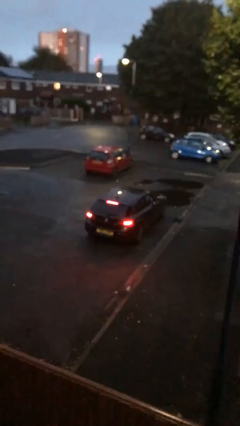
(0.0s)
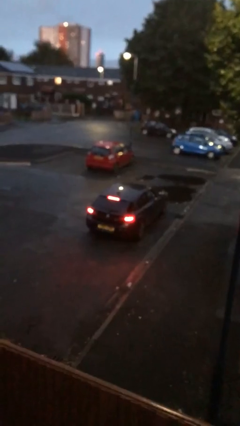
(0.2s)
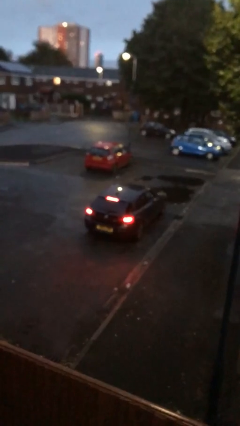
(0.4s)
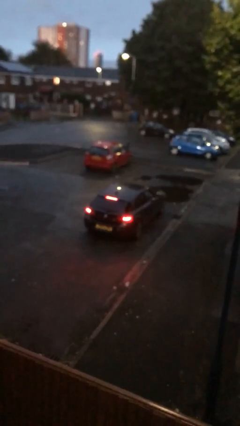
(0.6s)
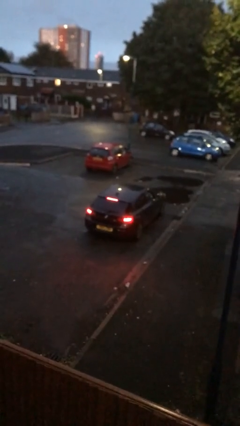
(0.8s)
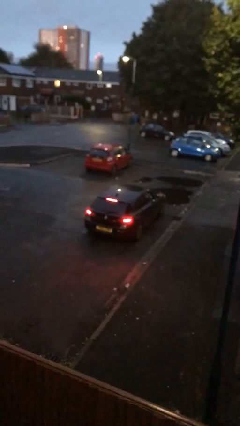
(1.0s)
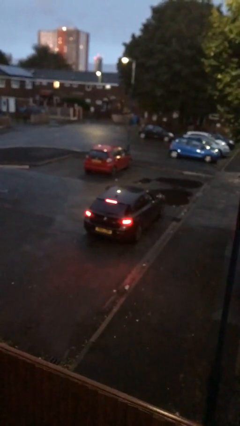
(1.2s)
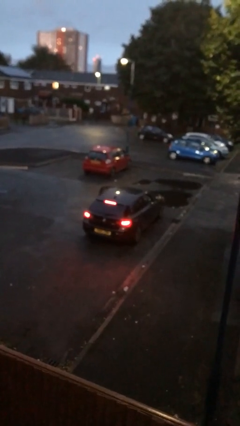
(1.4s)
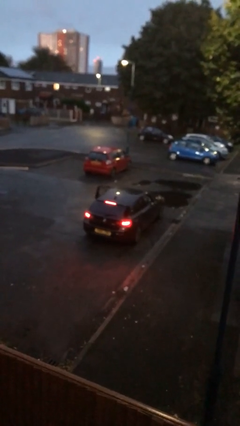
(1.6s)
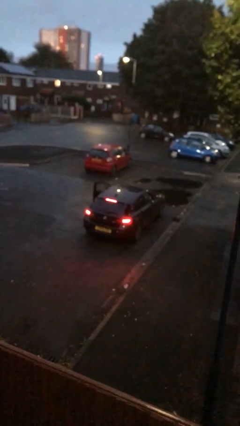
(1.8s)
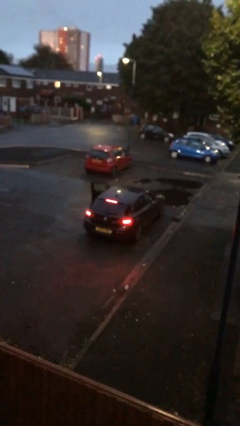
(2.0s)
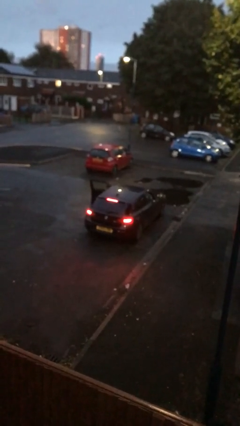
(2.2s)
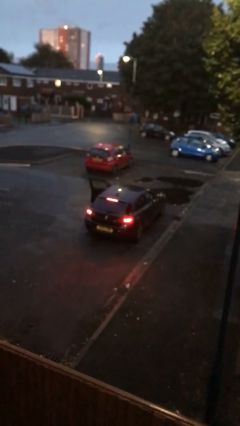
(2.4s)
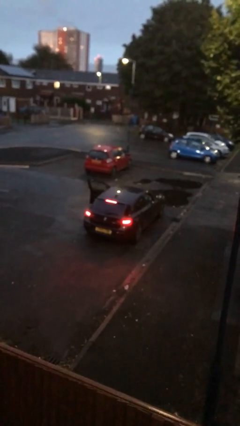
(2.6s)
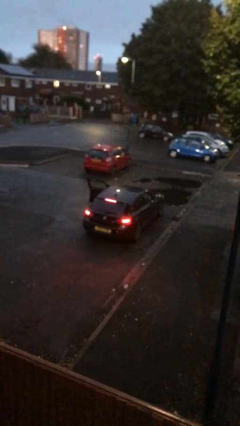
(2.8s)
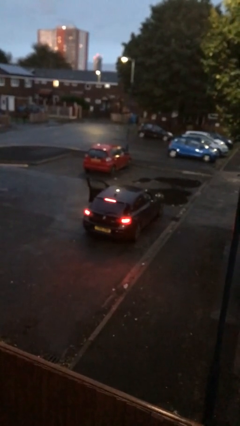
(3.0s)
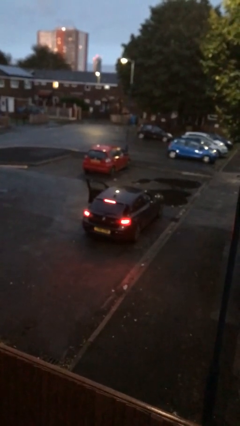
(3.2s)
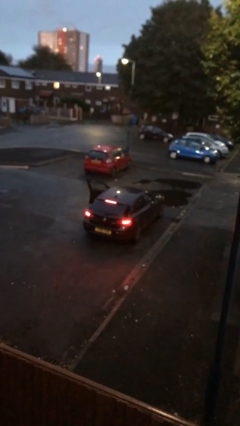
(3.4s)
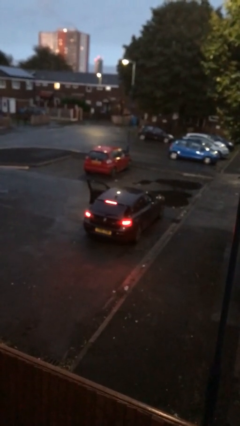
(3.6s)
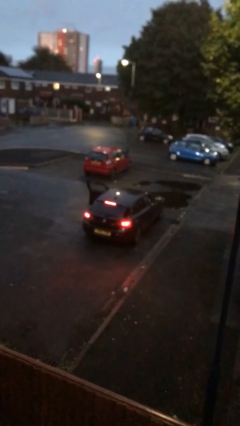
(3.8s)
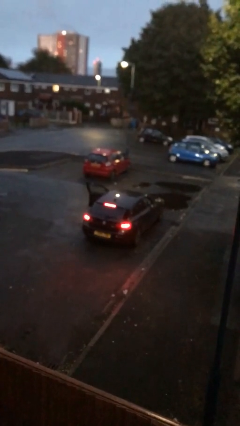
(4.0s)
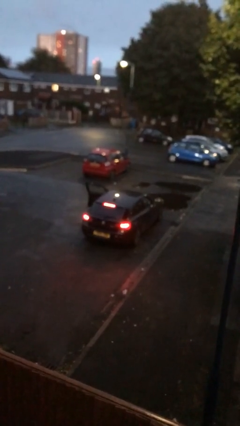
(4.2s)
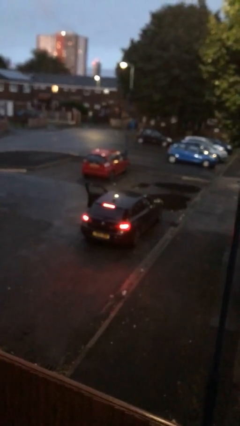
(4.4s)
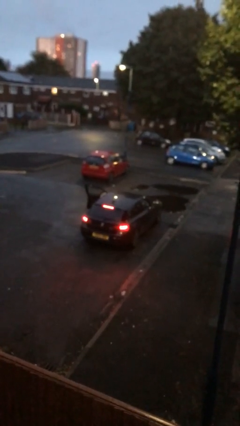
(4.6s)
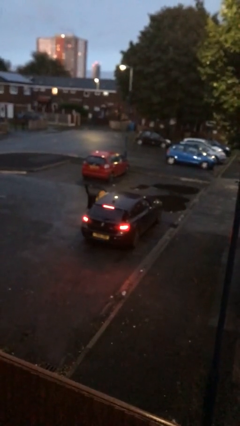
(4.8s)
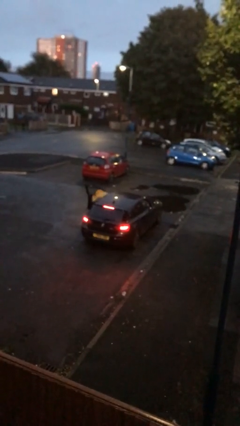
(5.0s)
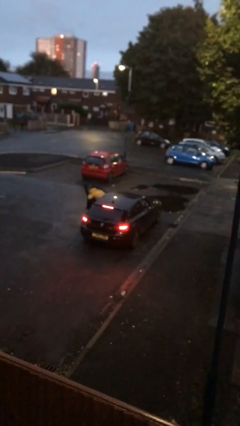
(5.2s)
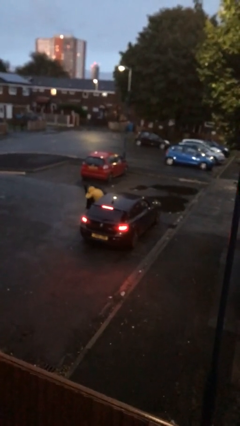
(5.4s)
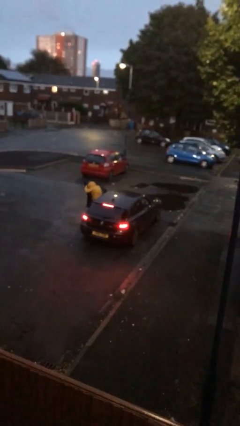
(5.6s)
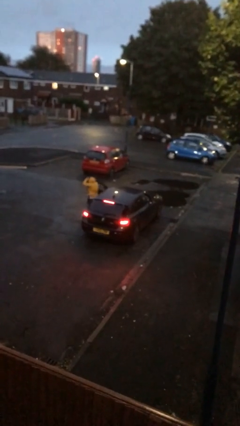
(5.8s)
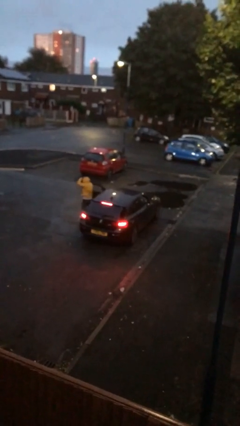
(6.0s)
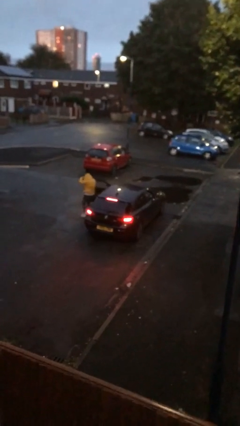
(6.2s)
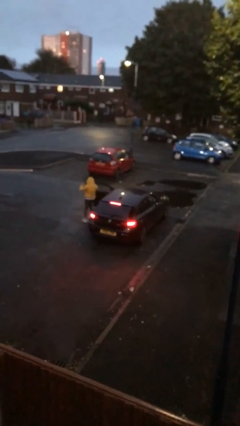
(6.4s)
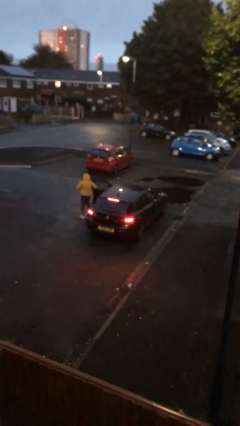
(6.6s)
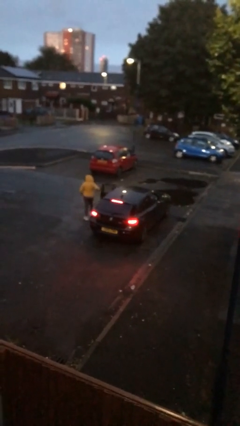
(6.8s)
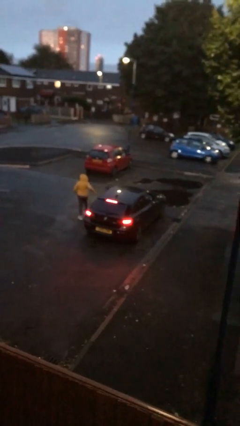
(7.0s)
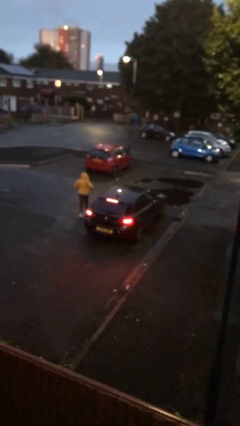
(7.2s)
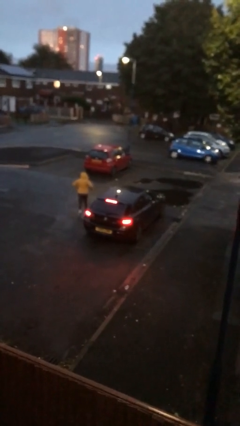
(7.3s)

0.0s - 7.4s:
car drops off person

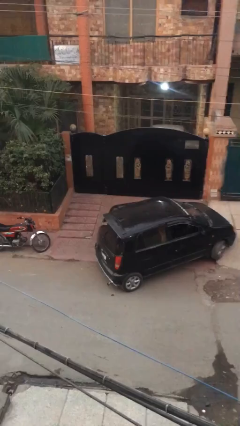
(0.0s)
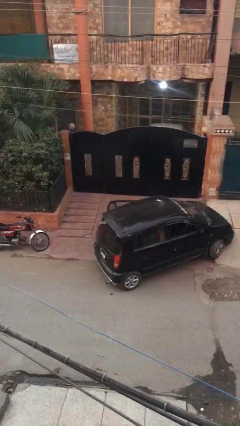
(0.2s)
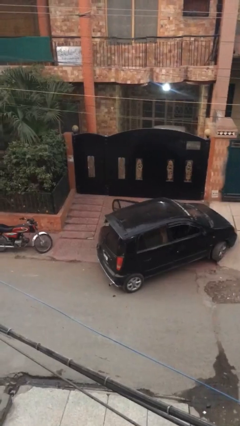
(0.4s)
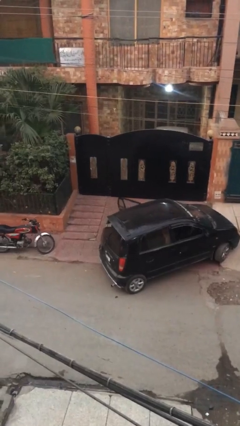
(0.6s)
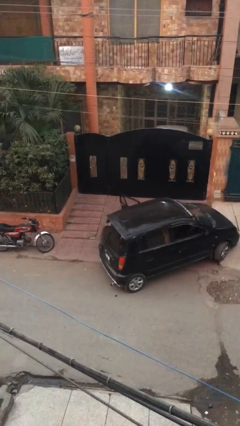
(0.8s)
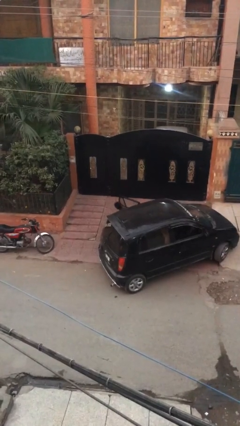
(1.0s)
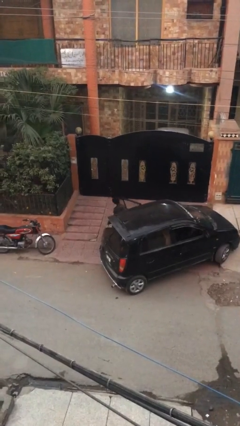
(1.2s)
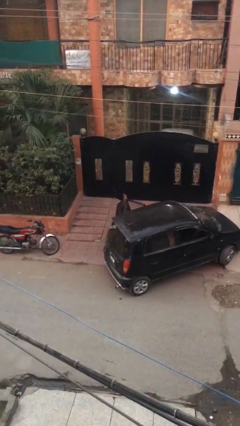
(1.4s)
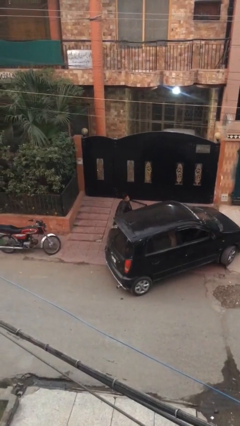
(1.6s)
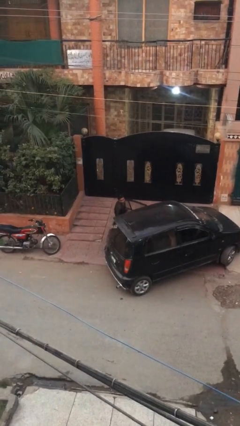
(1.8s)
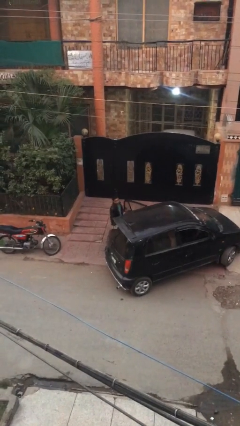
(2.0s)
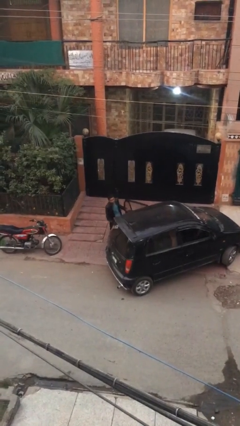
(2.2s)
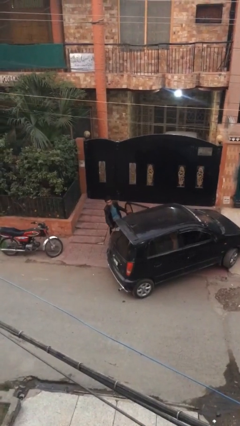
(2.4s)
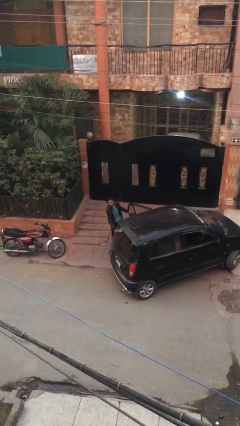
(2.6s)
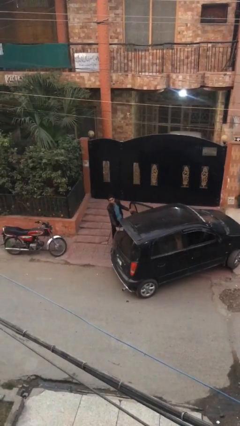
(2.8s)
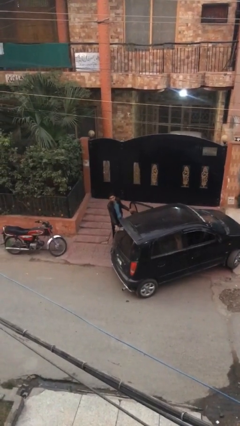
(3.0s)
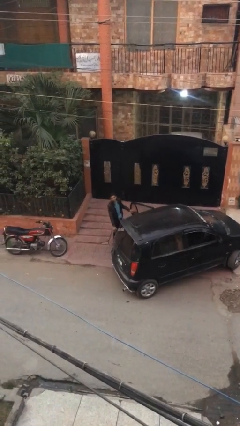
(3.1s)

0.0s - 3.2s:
person exits car

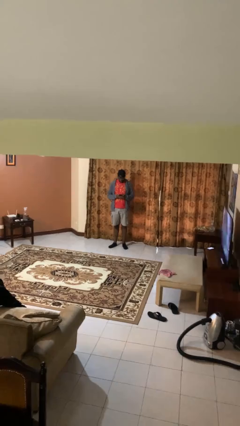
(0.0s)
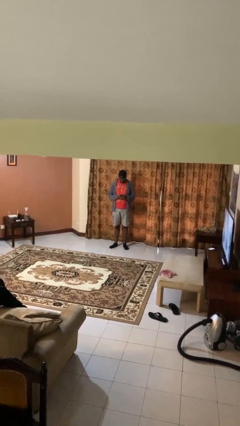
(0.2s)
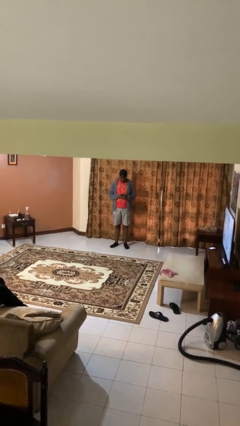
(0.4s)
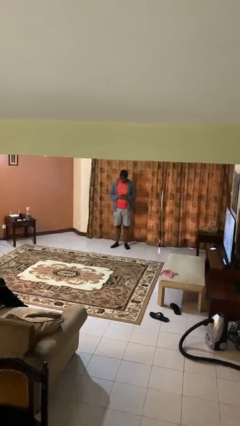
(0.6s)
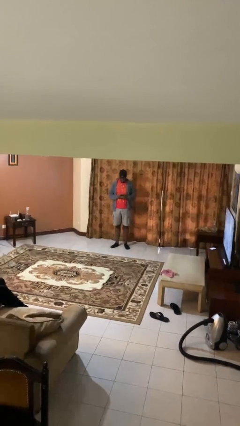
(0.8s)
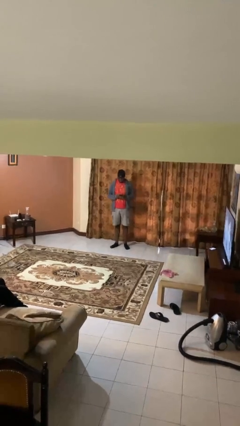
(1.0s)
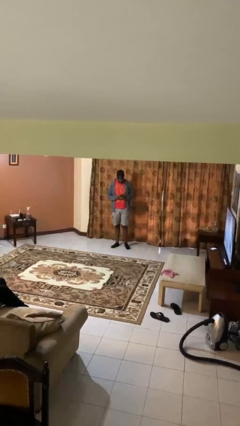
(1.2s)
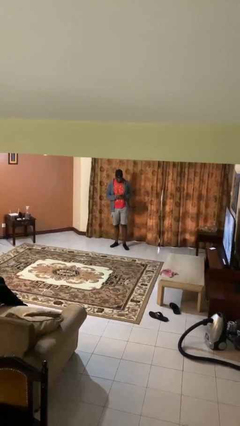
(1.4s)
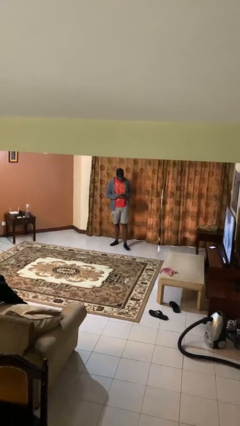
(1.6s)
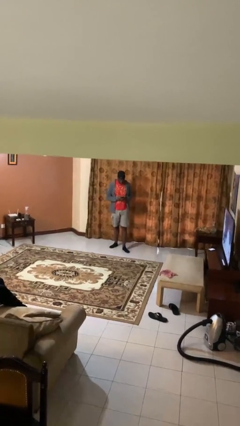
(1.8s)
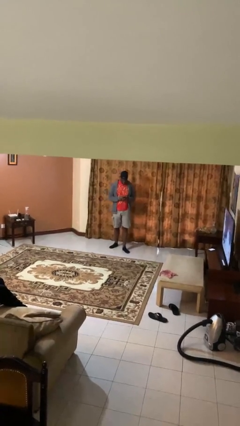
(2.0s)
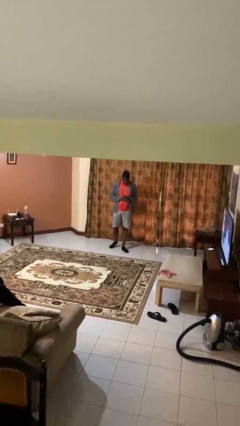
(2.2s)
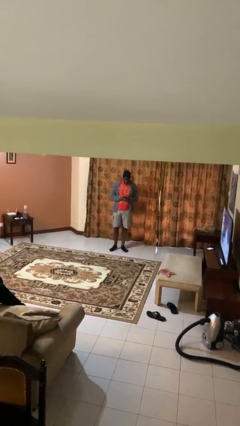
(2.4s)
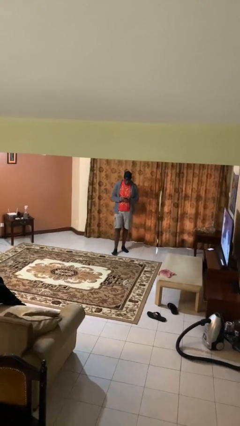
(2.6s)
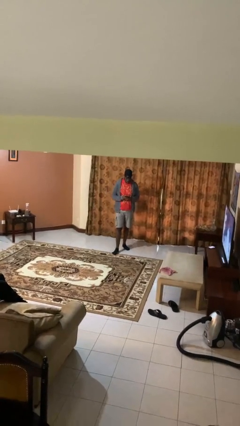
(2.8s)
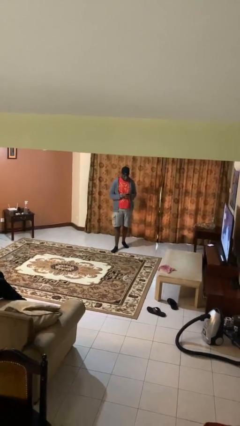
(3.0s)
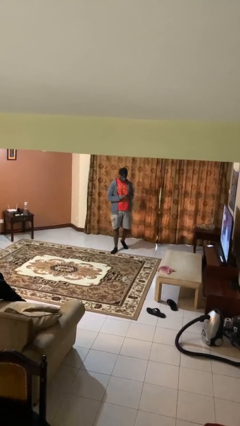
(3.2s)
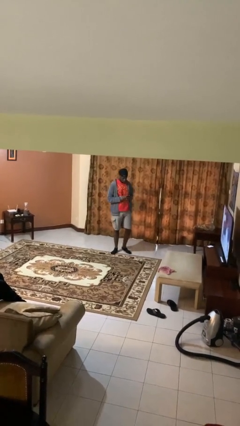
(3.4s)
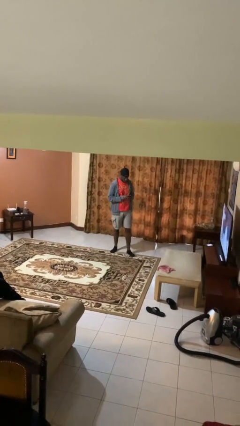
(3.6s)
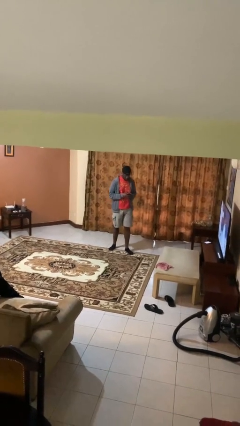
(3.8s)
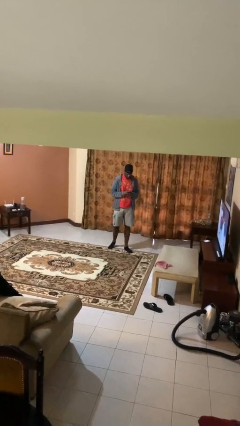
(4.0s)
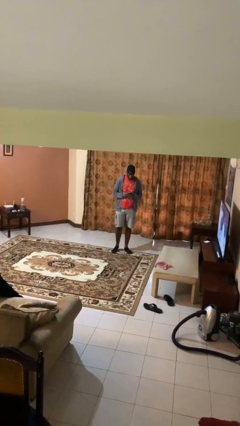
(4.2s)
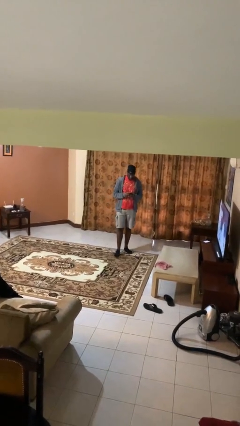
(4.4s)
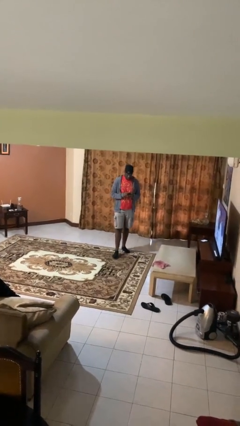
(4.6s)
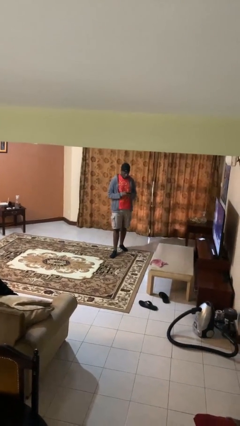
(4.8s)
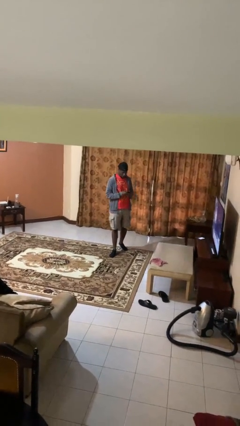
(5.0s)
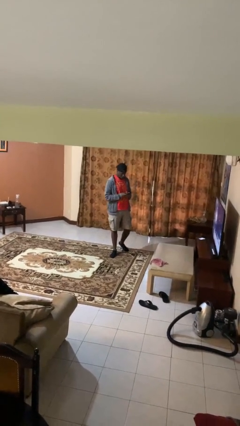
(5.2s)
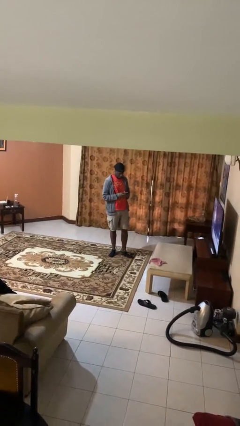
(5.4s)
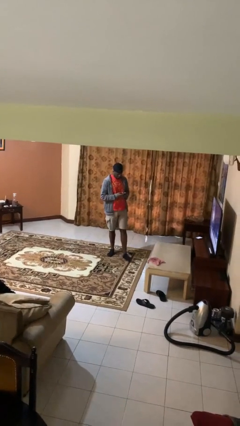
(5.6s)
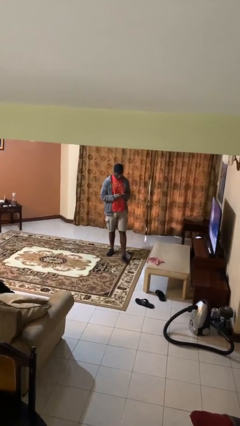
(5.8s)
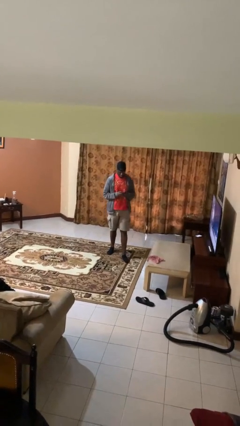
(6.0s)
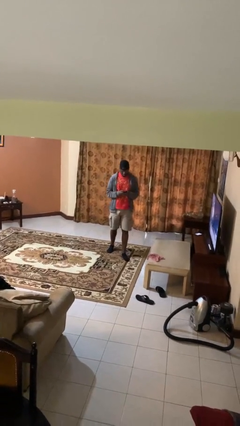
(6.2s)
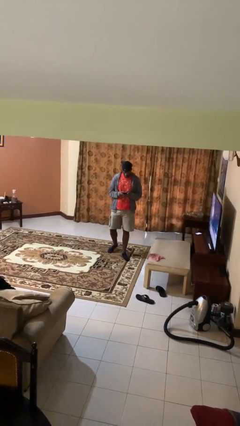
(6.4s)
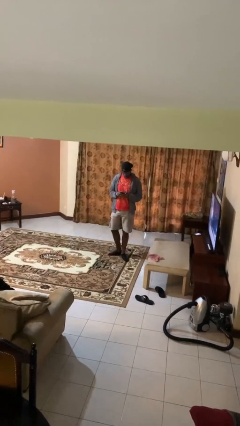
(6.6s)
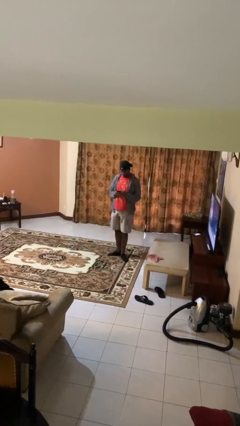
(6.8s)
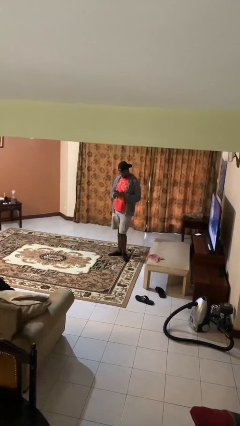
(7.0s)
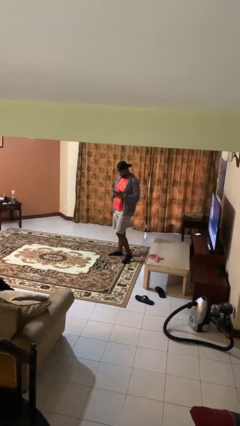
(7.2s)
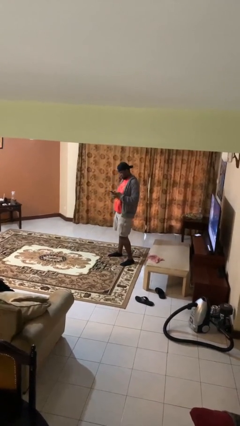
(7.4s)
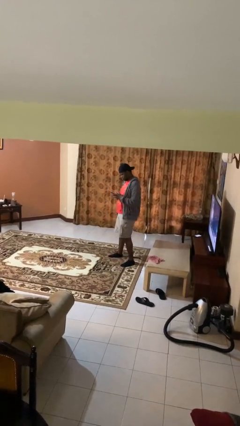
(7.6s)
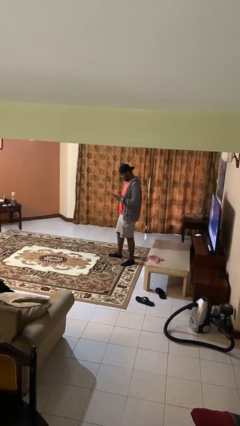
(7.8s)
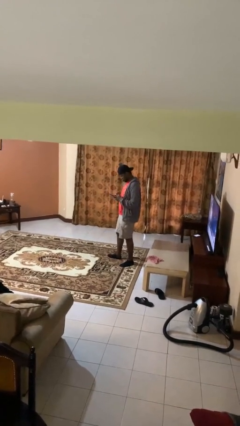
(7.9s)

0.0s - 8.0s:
person texts on phone
